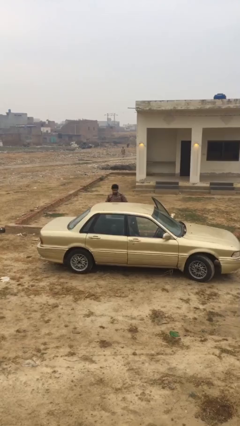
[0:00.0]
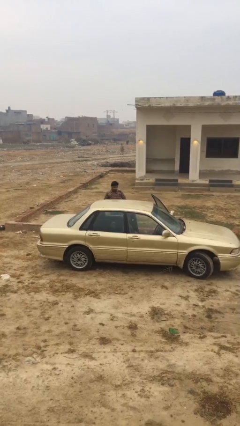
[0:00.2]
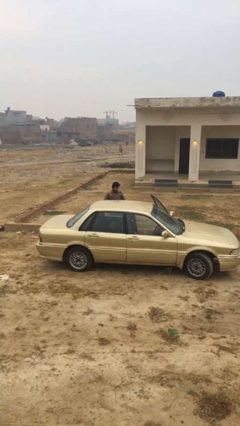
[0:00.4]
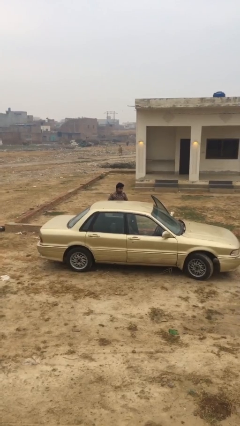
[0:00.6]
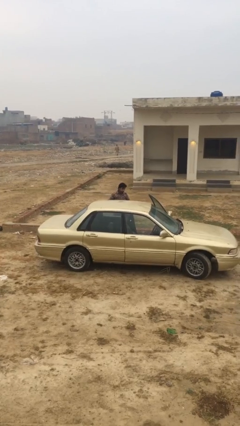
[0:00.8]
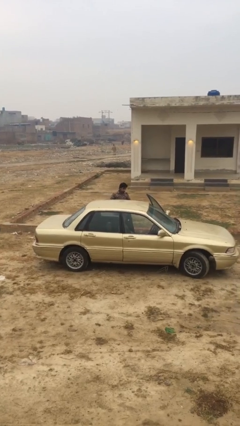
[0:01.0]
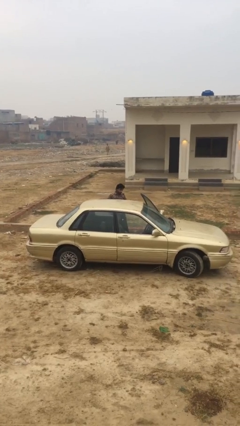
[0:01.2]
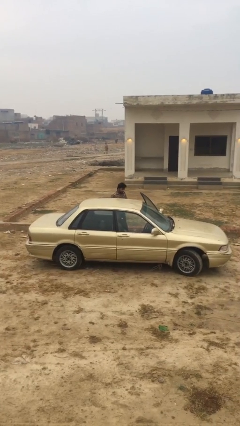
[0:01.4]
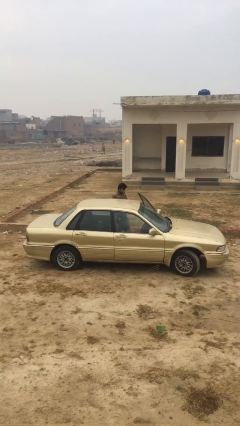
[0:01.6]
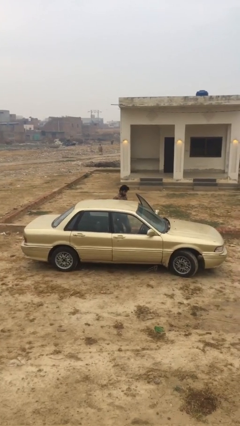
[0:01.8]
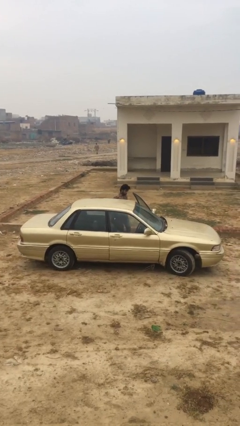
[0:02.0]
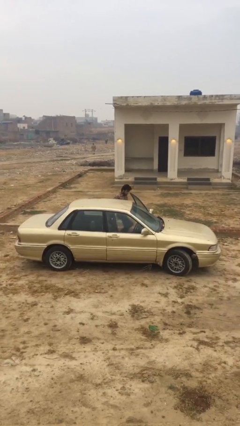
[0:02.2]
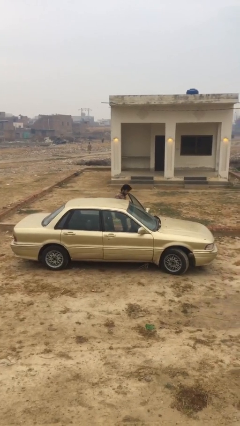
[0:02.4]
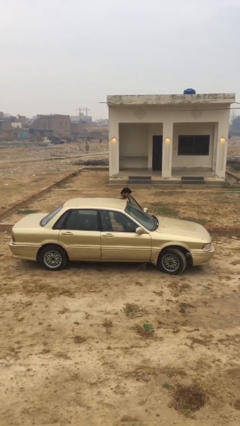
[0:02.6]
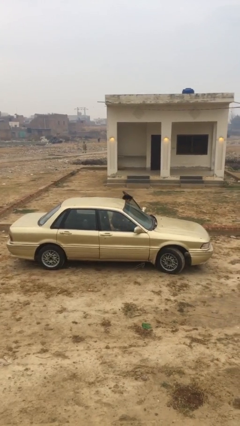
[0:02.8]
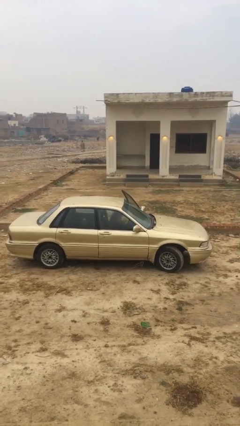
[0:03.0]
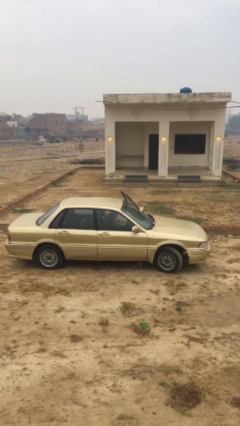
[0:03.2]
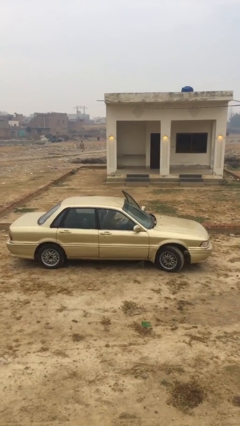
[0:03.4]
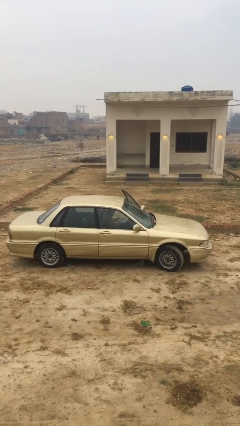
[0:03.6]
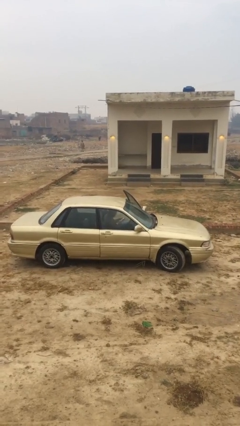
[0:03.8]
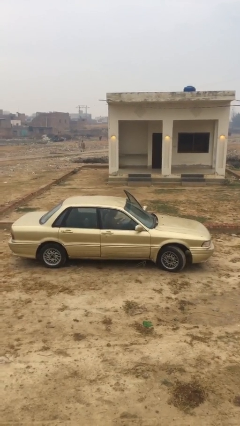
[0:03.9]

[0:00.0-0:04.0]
person enters car

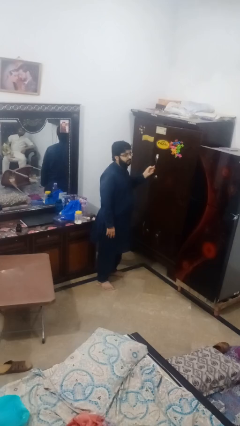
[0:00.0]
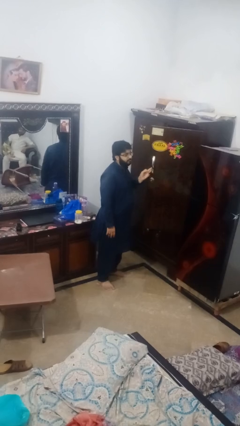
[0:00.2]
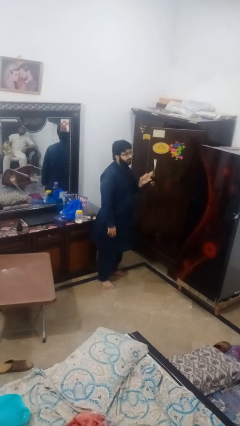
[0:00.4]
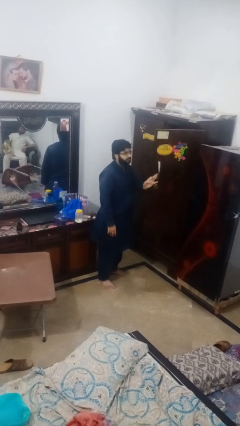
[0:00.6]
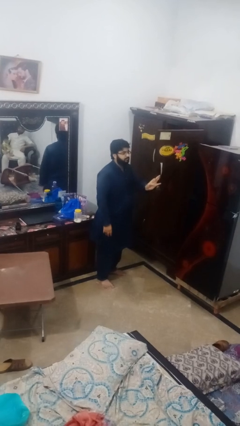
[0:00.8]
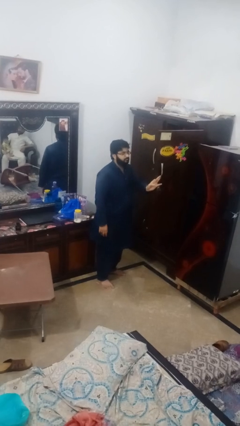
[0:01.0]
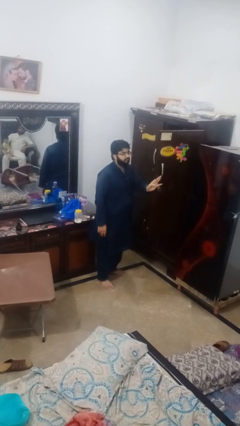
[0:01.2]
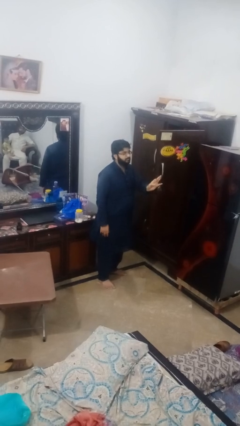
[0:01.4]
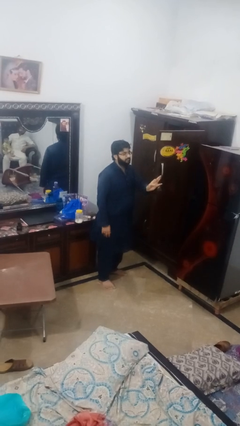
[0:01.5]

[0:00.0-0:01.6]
person opens closet door

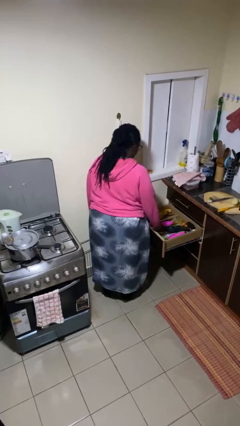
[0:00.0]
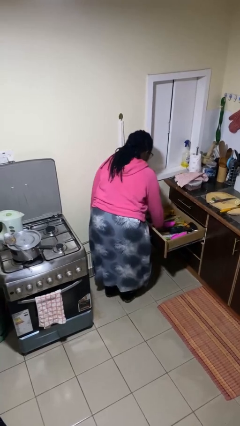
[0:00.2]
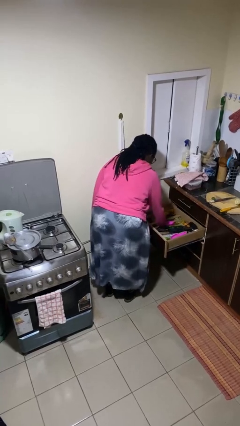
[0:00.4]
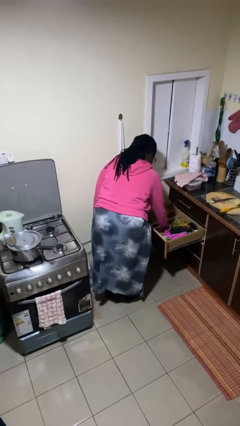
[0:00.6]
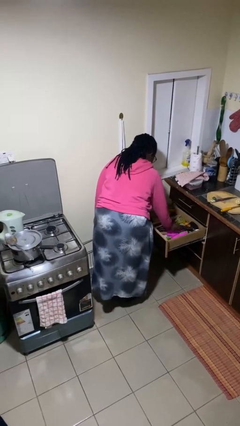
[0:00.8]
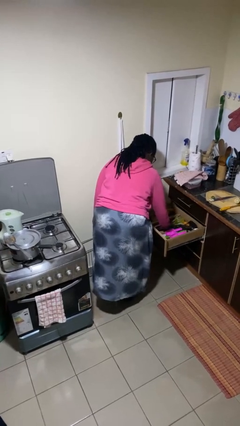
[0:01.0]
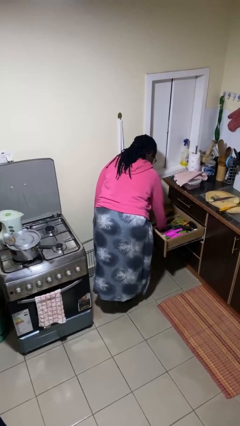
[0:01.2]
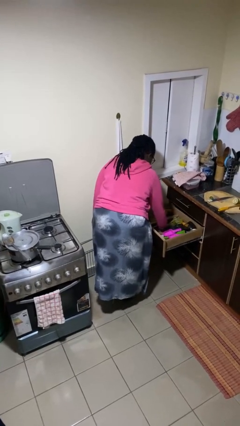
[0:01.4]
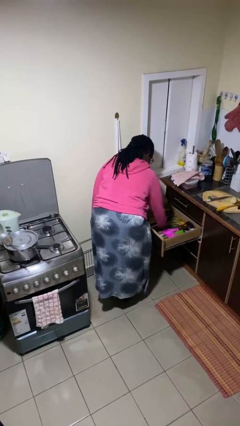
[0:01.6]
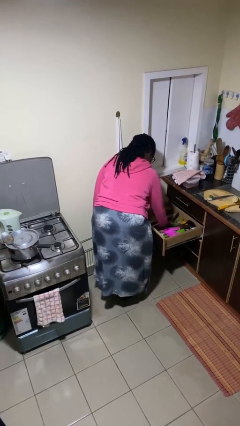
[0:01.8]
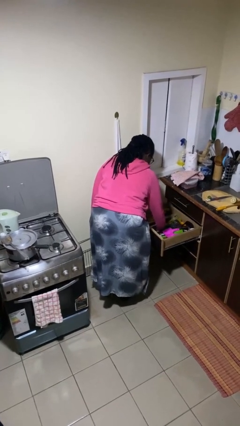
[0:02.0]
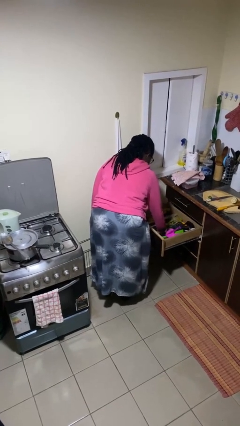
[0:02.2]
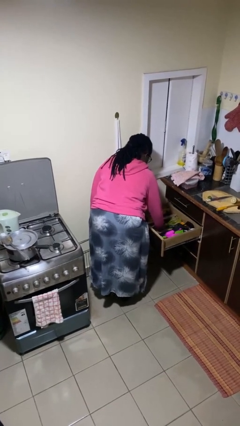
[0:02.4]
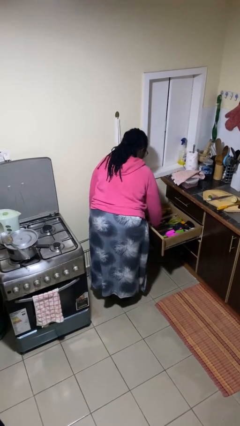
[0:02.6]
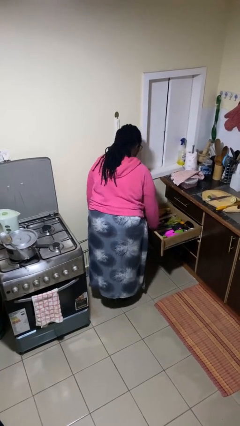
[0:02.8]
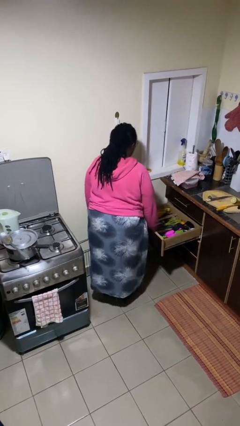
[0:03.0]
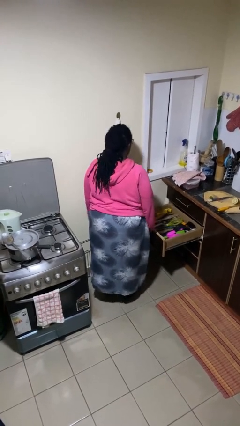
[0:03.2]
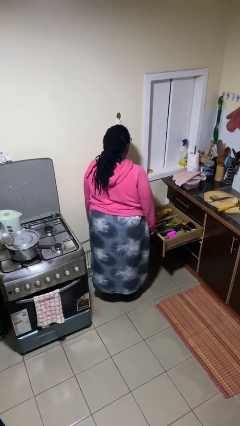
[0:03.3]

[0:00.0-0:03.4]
person searches in kitchen drawer

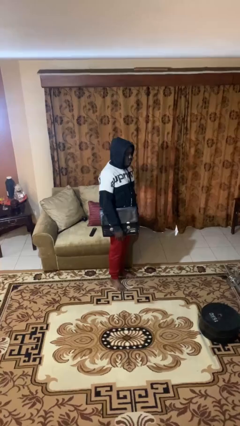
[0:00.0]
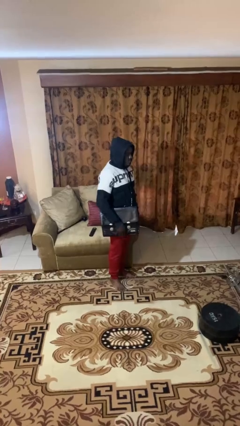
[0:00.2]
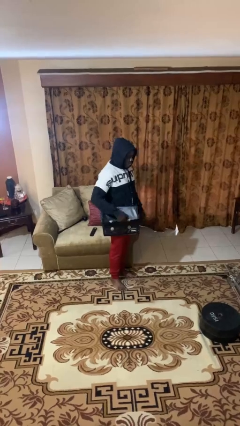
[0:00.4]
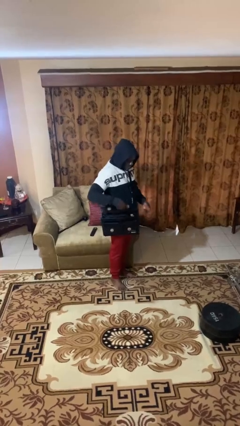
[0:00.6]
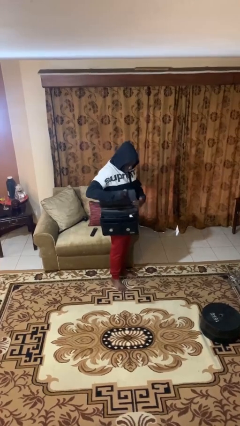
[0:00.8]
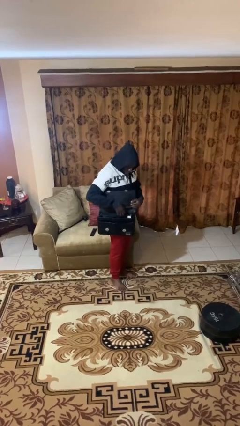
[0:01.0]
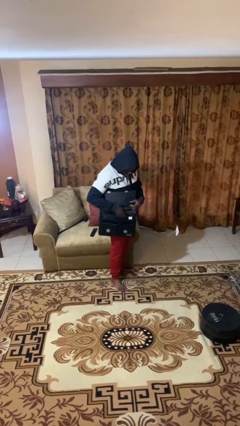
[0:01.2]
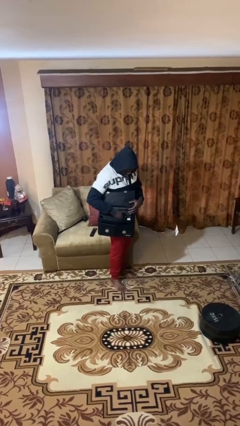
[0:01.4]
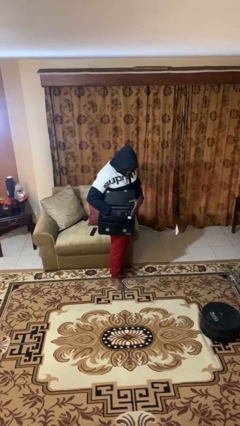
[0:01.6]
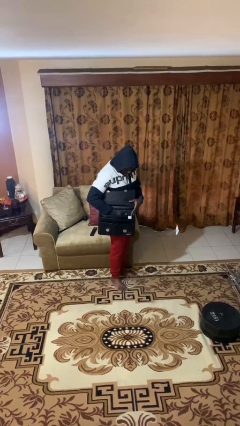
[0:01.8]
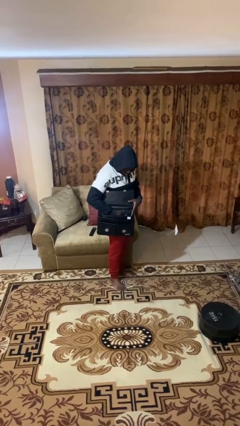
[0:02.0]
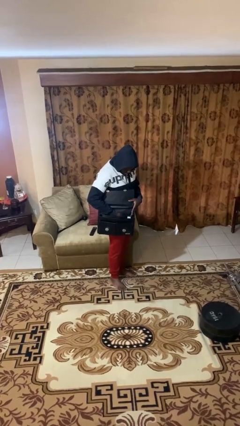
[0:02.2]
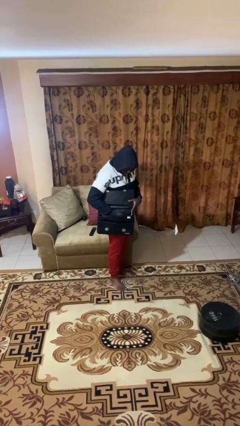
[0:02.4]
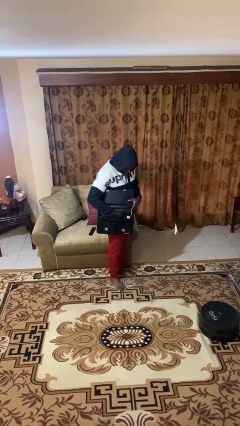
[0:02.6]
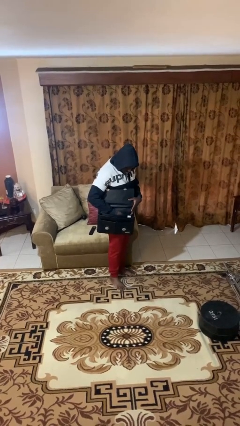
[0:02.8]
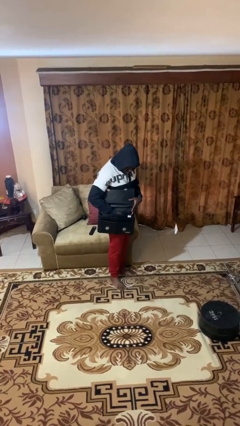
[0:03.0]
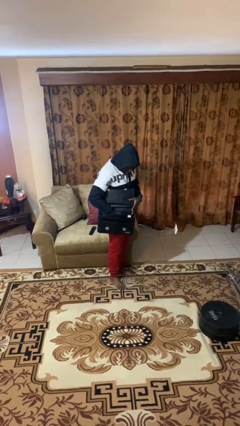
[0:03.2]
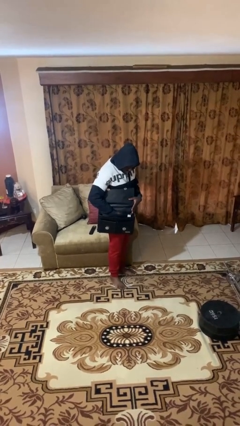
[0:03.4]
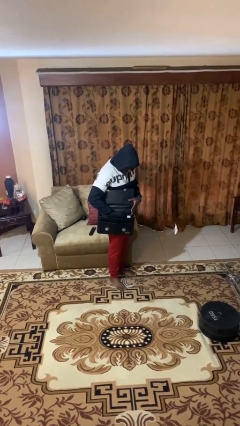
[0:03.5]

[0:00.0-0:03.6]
person searches in purse

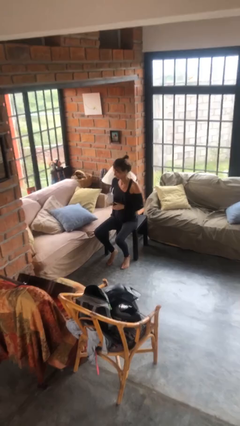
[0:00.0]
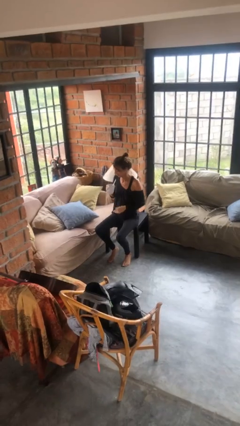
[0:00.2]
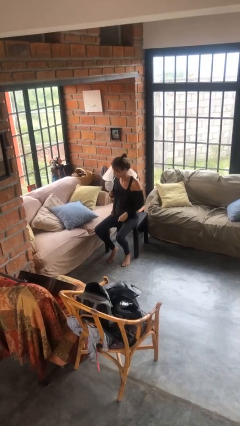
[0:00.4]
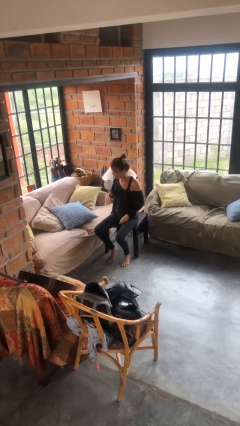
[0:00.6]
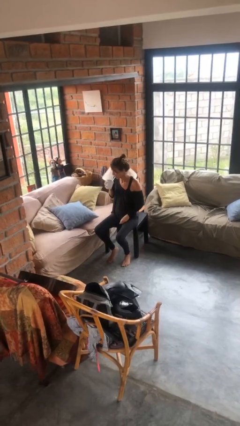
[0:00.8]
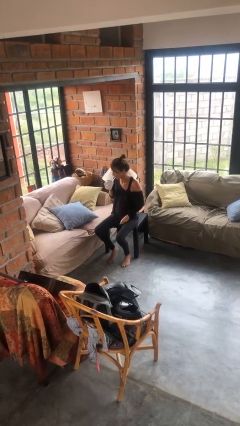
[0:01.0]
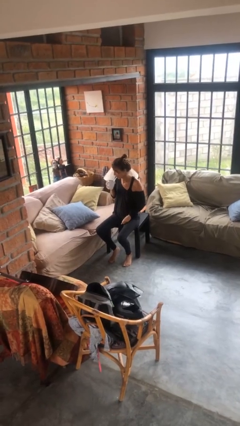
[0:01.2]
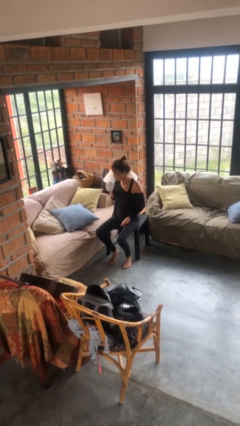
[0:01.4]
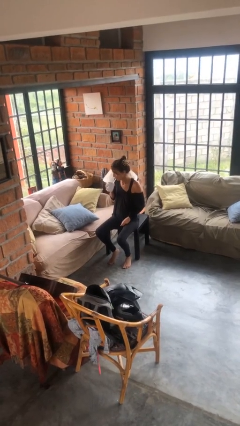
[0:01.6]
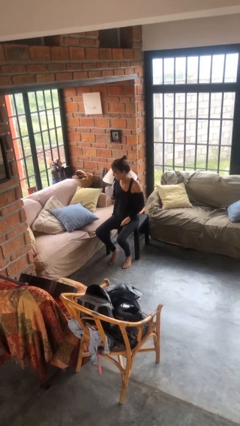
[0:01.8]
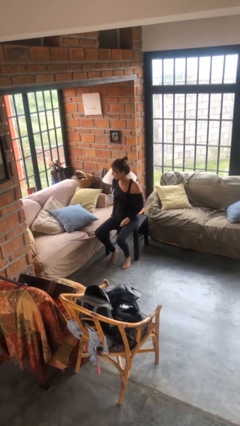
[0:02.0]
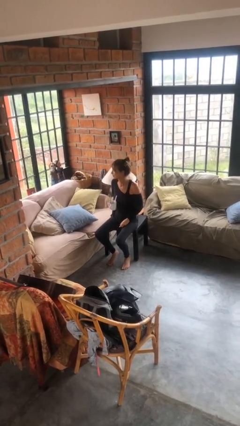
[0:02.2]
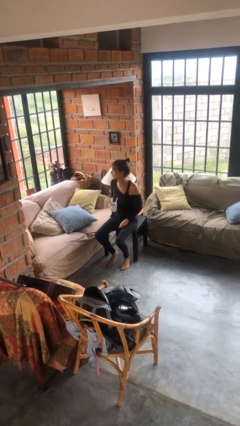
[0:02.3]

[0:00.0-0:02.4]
person drinks from straw

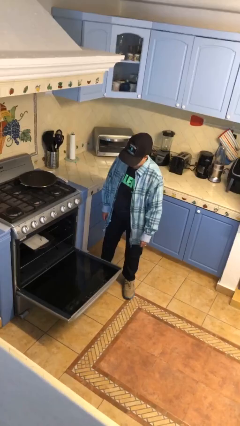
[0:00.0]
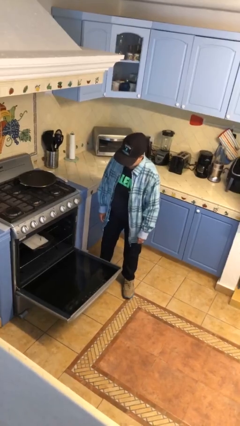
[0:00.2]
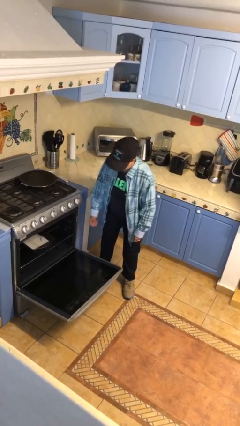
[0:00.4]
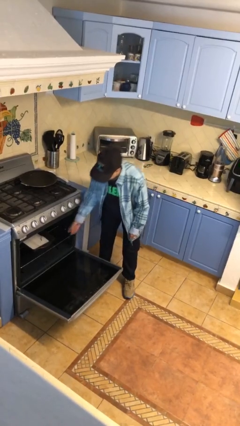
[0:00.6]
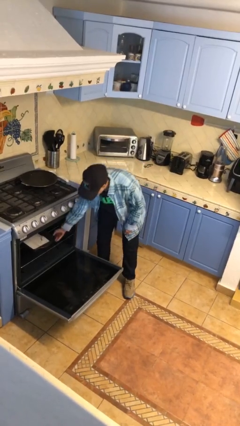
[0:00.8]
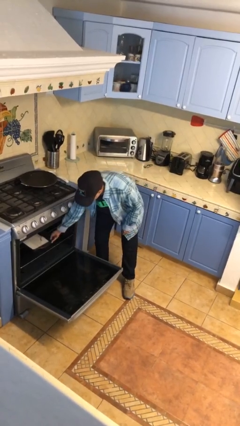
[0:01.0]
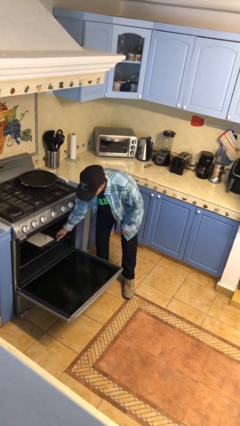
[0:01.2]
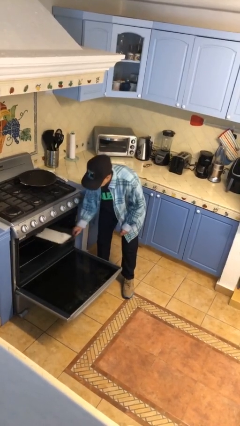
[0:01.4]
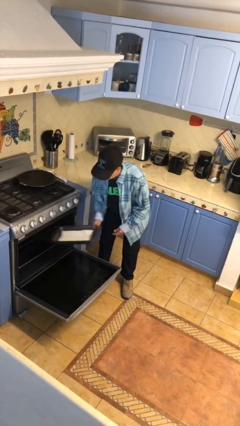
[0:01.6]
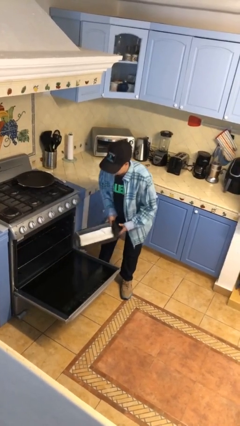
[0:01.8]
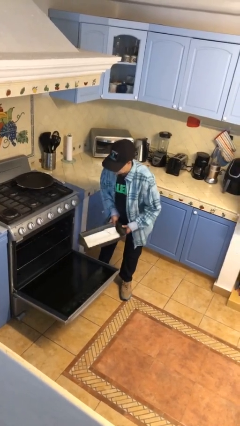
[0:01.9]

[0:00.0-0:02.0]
person takes object from oven

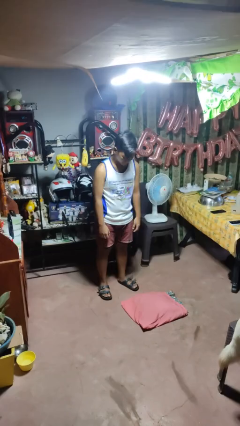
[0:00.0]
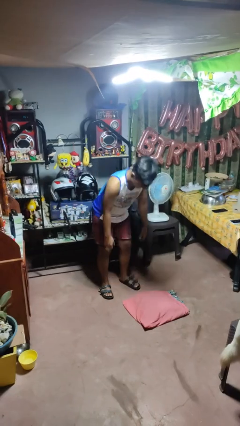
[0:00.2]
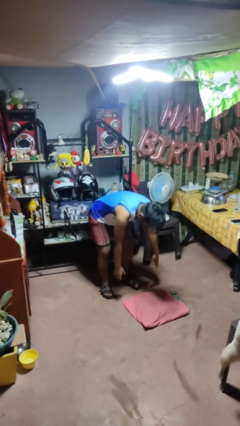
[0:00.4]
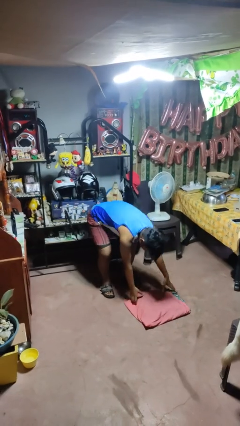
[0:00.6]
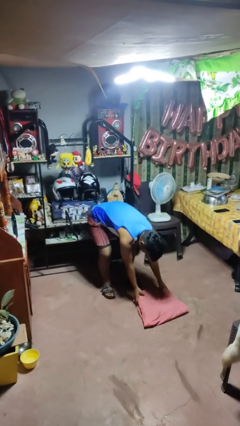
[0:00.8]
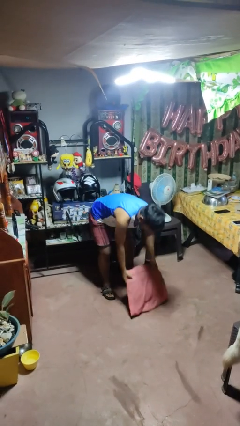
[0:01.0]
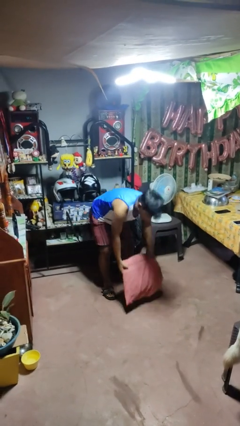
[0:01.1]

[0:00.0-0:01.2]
person picks up object from floor
